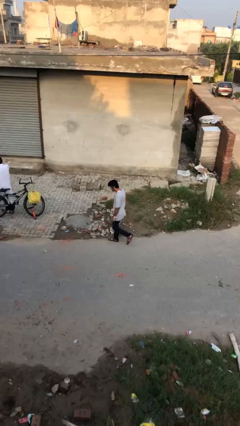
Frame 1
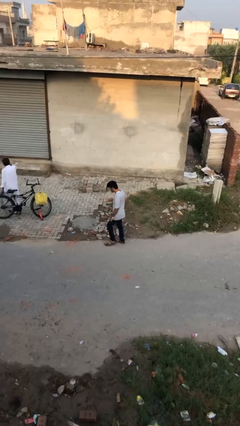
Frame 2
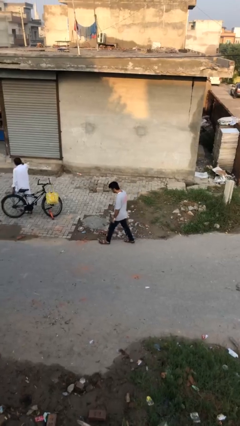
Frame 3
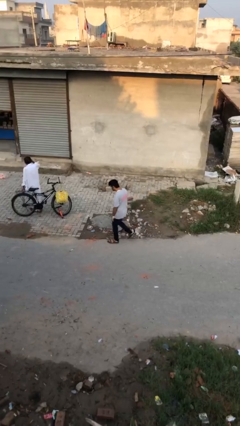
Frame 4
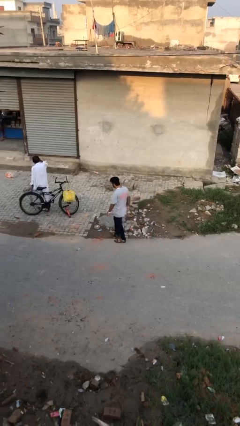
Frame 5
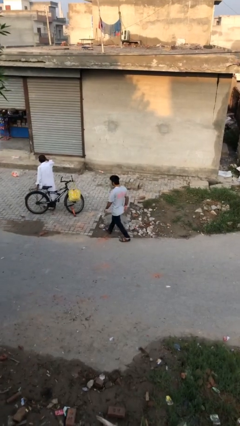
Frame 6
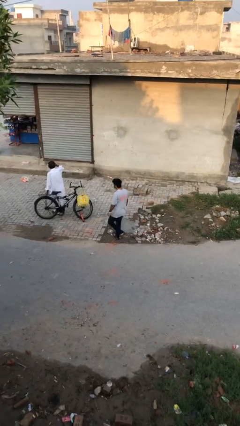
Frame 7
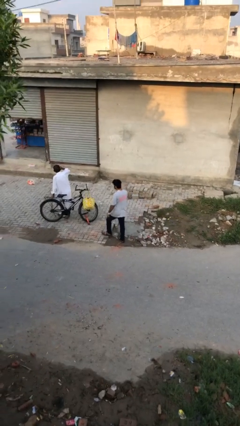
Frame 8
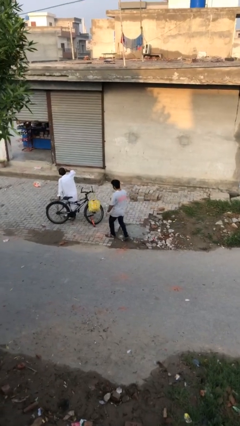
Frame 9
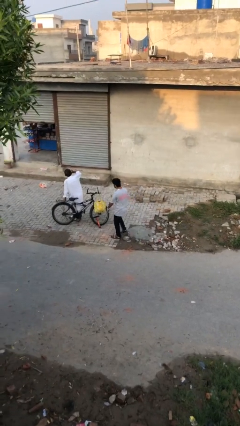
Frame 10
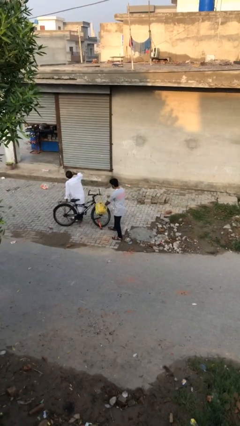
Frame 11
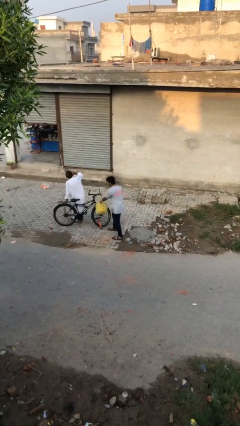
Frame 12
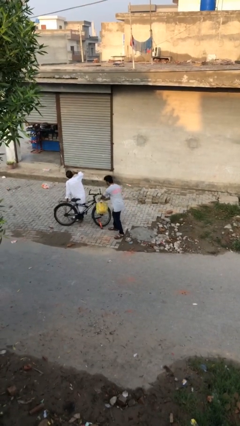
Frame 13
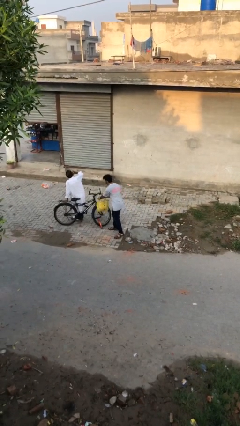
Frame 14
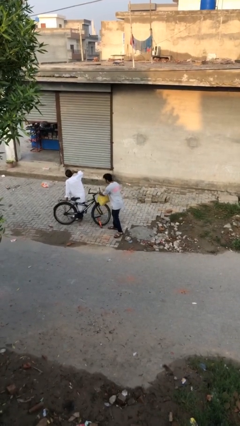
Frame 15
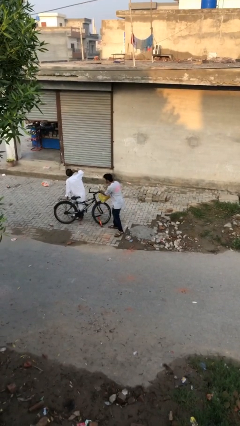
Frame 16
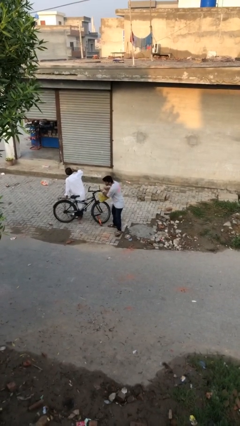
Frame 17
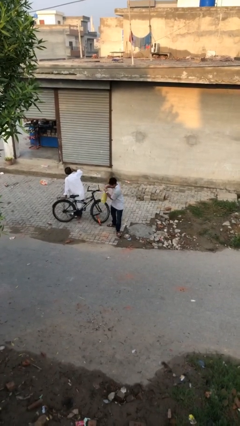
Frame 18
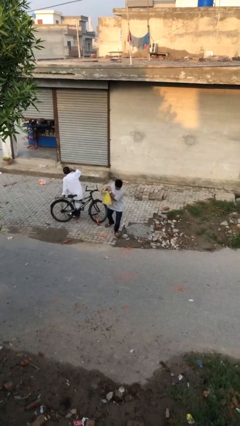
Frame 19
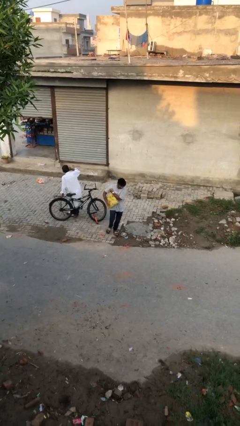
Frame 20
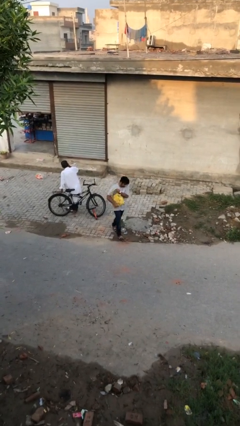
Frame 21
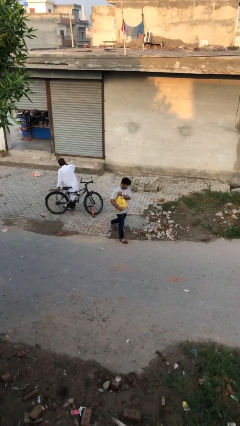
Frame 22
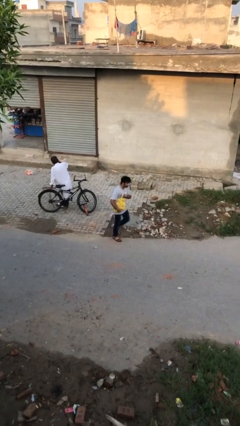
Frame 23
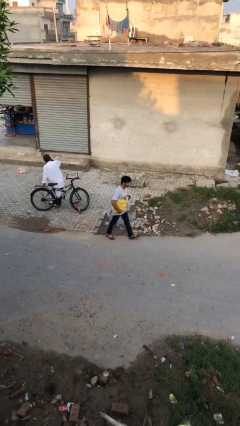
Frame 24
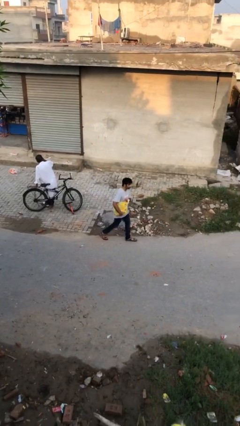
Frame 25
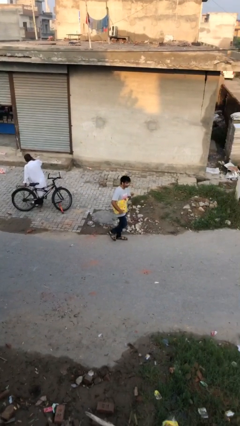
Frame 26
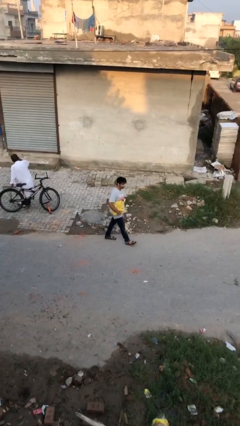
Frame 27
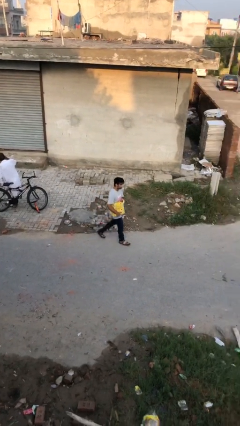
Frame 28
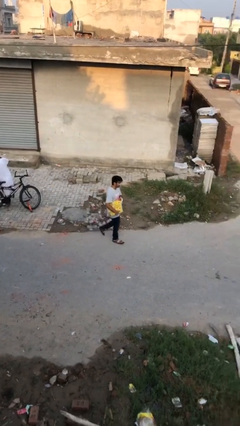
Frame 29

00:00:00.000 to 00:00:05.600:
person steals object from person

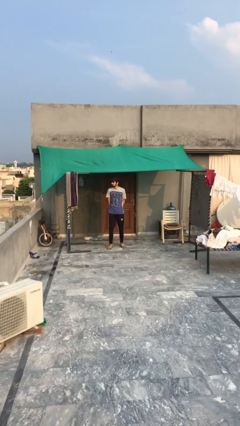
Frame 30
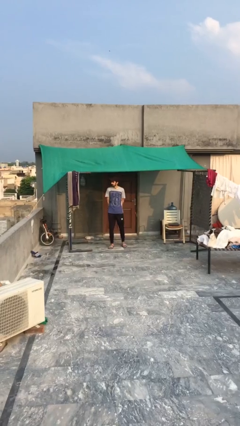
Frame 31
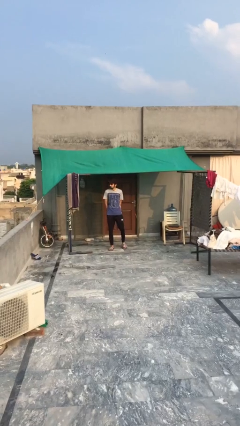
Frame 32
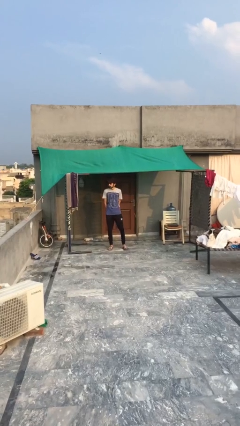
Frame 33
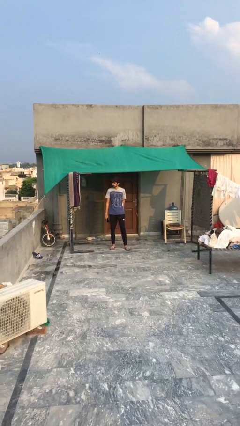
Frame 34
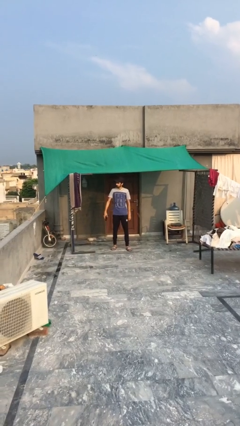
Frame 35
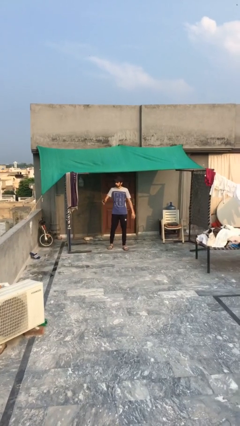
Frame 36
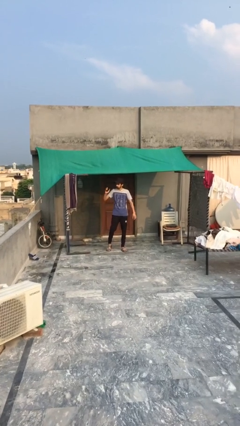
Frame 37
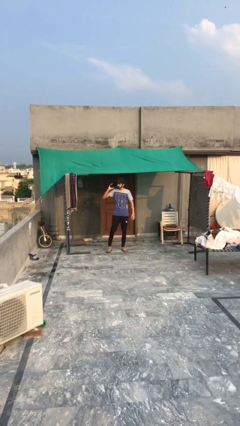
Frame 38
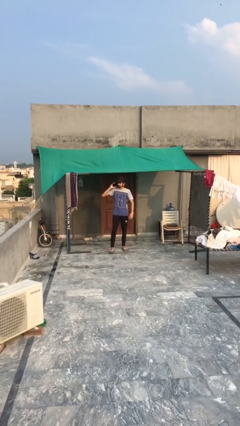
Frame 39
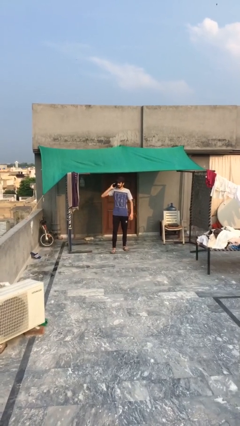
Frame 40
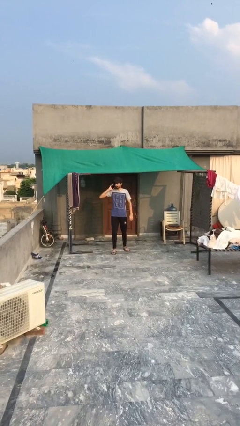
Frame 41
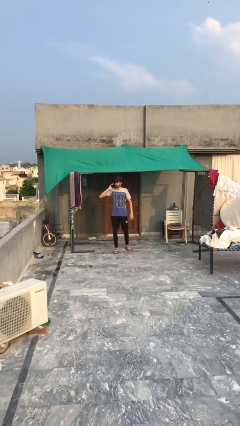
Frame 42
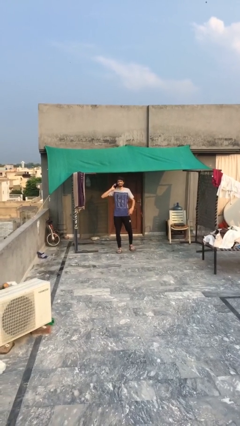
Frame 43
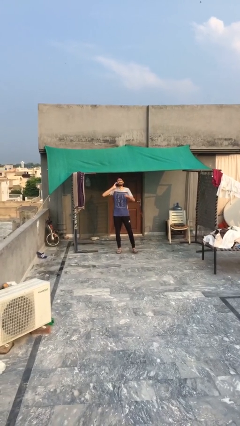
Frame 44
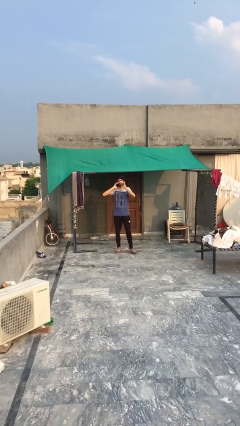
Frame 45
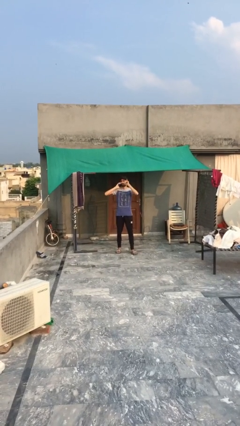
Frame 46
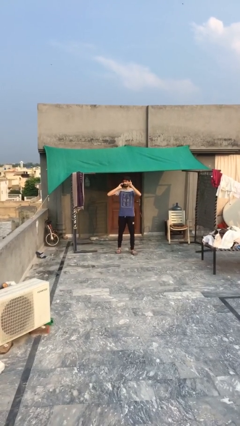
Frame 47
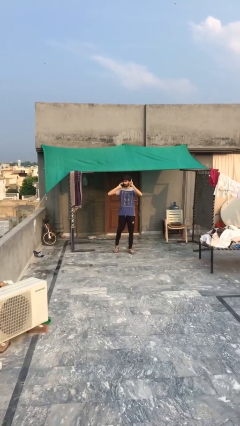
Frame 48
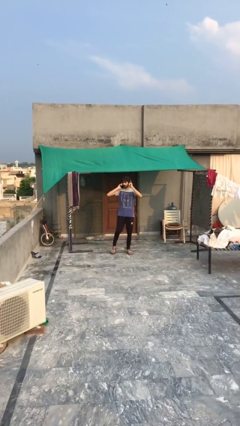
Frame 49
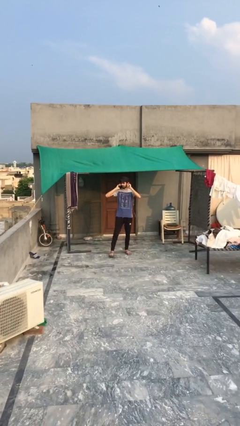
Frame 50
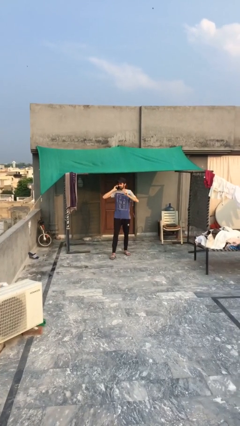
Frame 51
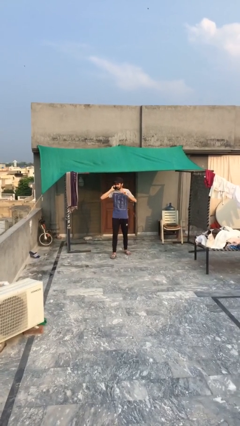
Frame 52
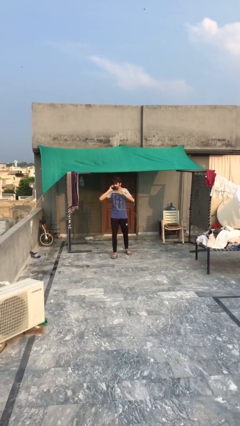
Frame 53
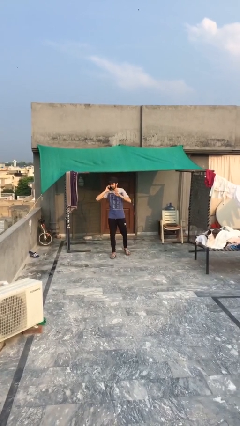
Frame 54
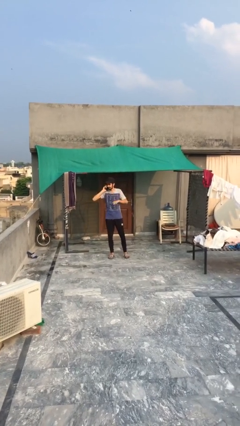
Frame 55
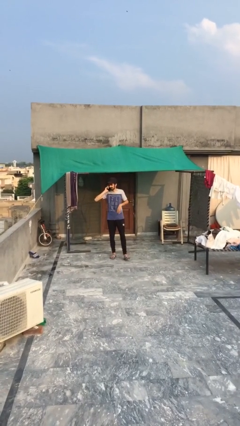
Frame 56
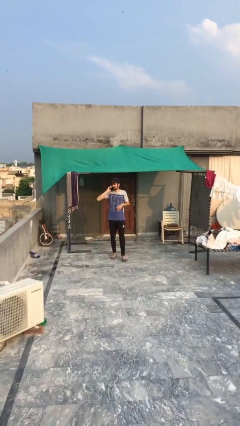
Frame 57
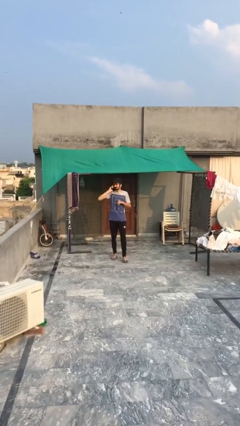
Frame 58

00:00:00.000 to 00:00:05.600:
person talks on phone

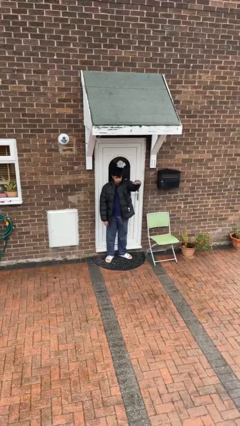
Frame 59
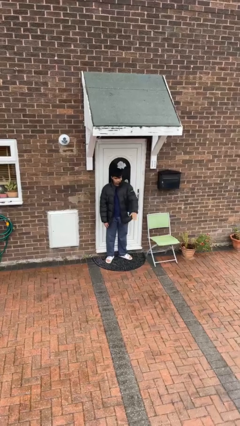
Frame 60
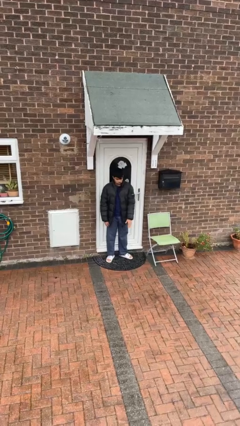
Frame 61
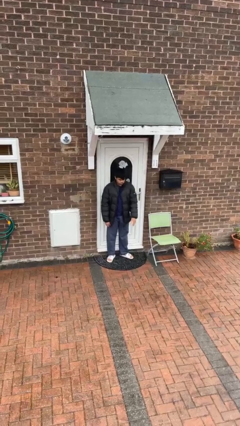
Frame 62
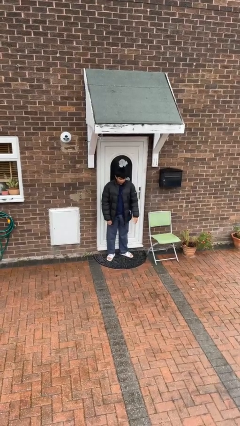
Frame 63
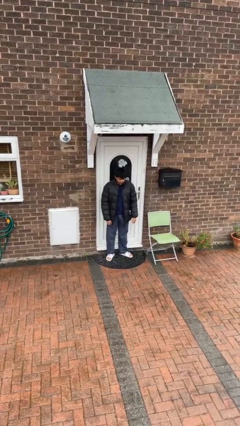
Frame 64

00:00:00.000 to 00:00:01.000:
person gestures swipe down

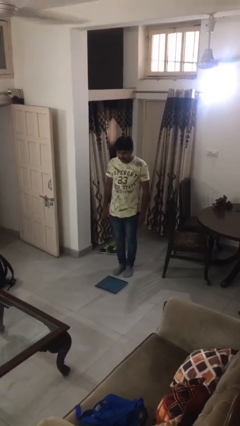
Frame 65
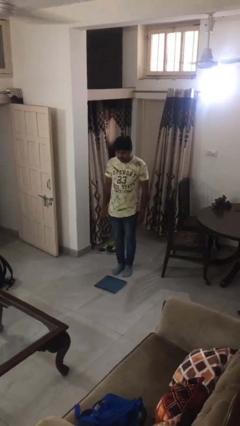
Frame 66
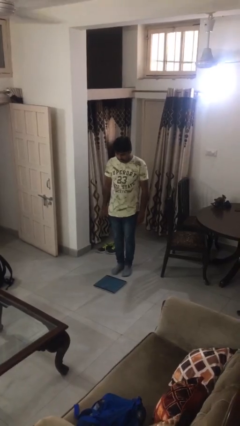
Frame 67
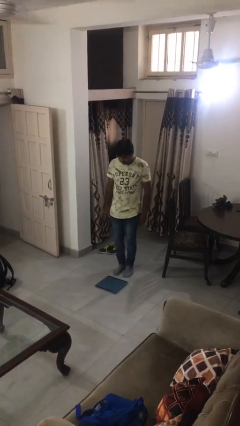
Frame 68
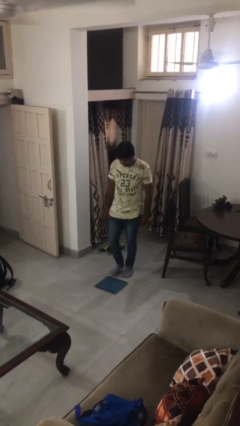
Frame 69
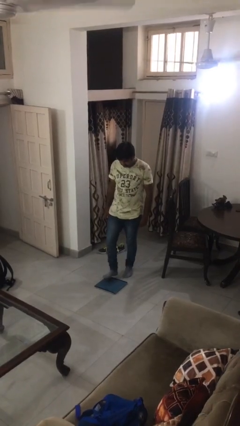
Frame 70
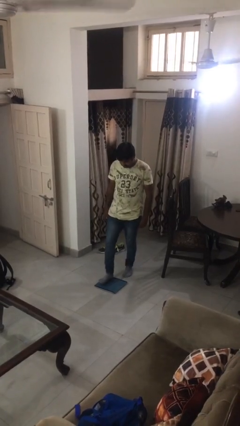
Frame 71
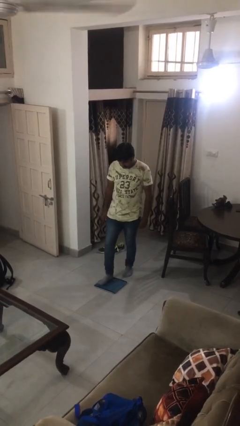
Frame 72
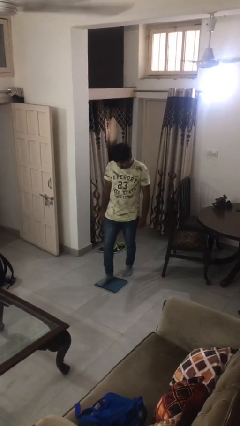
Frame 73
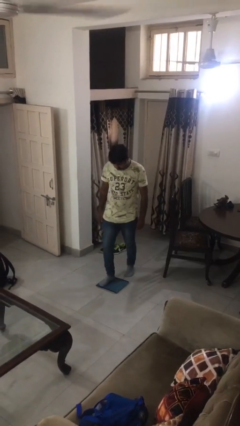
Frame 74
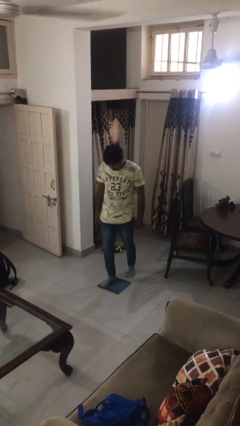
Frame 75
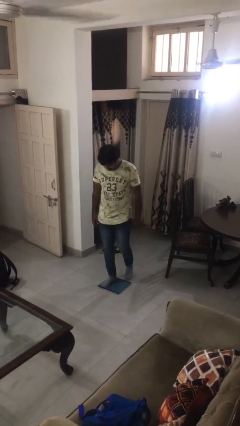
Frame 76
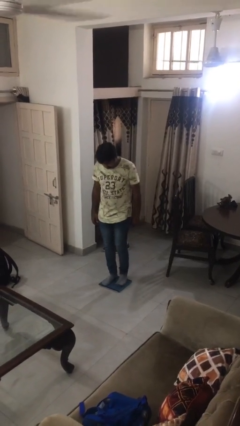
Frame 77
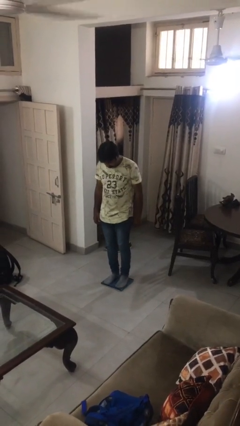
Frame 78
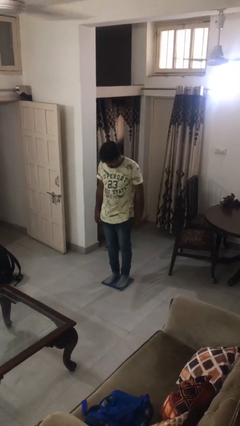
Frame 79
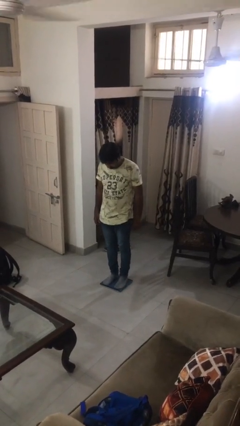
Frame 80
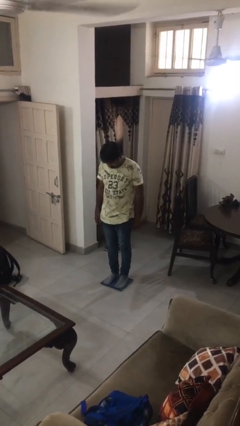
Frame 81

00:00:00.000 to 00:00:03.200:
person uses bodyweight scale

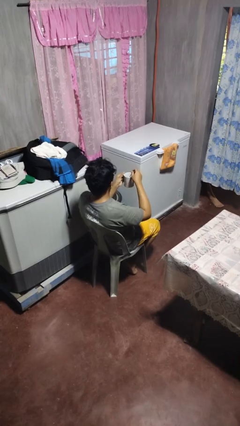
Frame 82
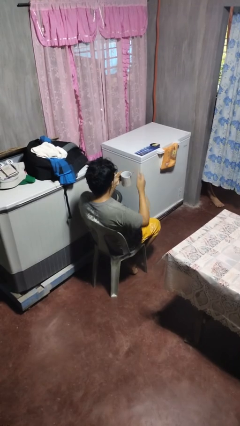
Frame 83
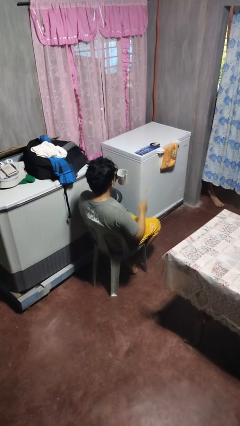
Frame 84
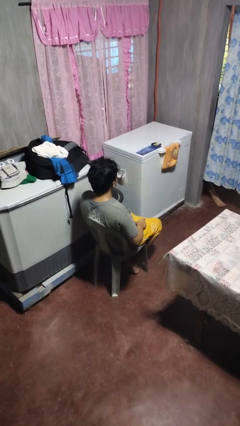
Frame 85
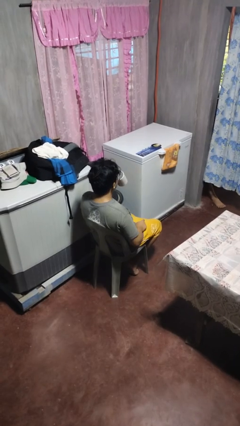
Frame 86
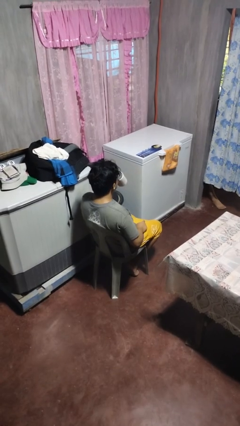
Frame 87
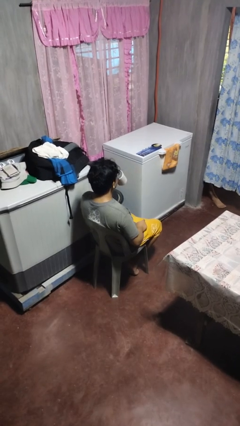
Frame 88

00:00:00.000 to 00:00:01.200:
person drinks from mug

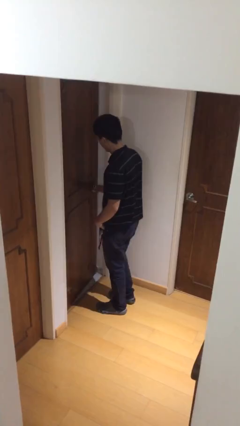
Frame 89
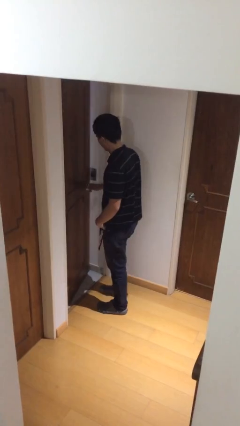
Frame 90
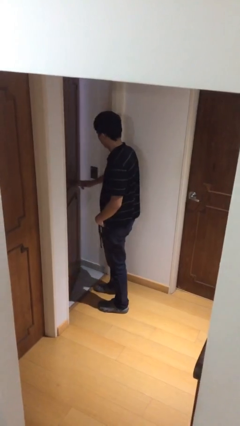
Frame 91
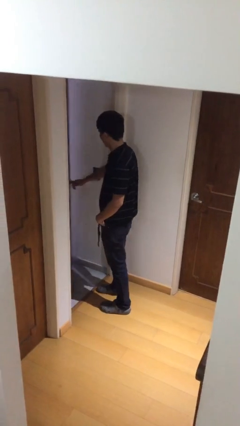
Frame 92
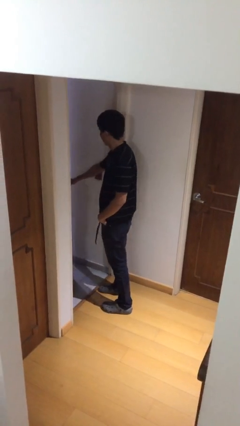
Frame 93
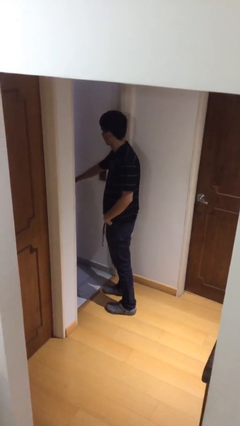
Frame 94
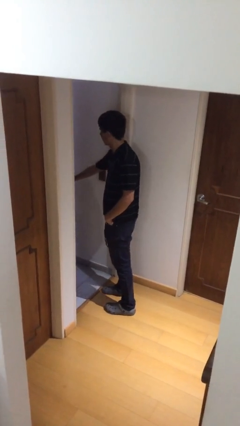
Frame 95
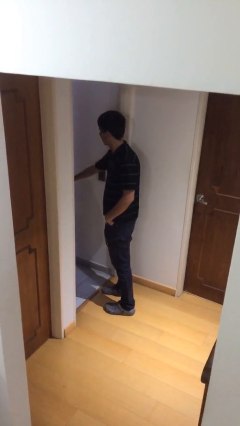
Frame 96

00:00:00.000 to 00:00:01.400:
person opens facility door
